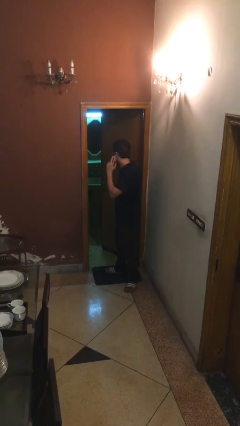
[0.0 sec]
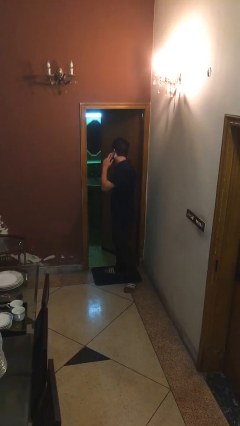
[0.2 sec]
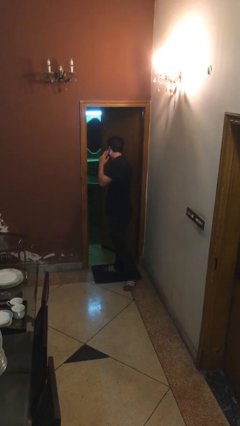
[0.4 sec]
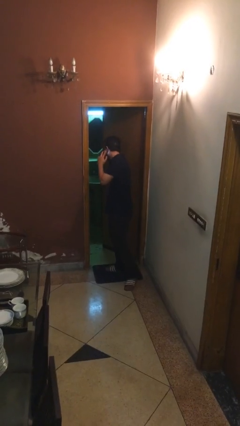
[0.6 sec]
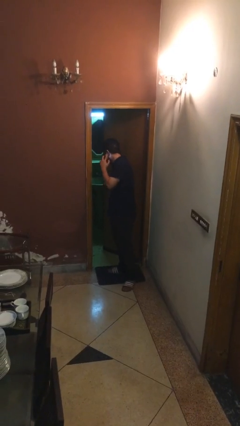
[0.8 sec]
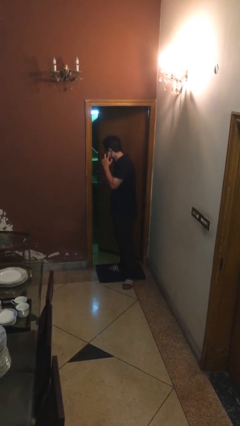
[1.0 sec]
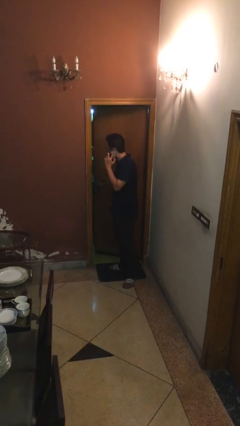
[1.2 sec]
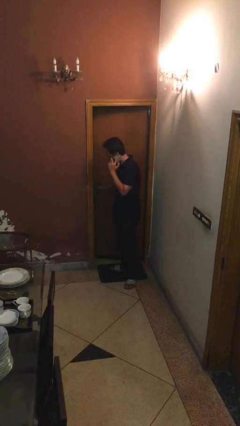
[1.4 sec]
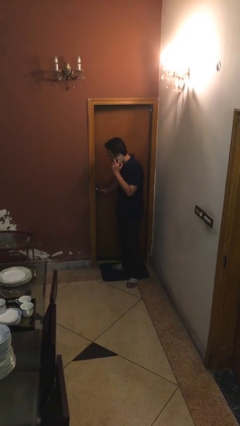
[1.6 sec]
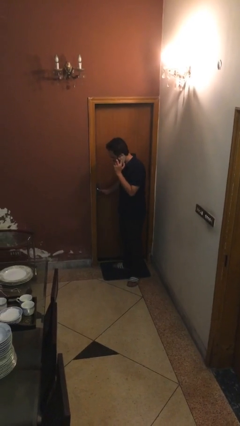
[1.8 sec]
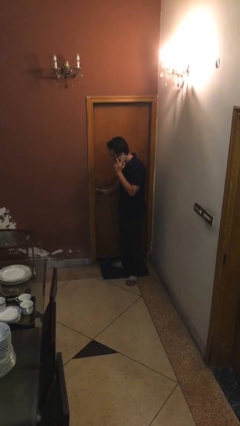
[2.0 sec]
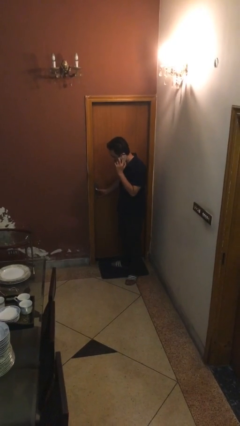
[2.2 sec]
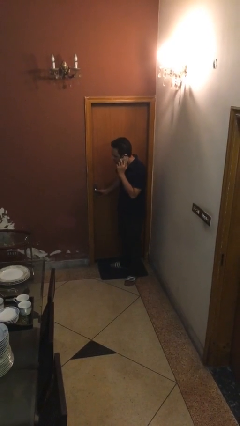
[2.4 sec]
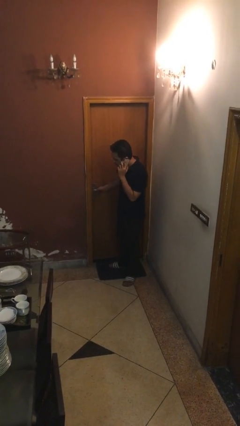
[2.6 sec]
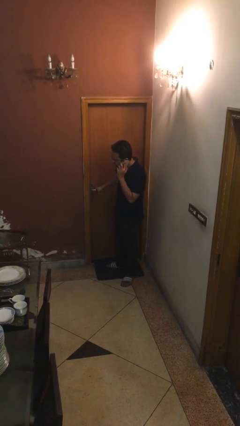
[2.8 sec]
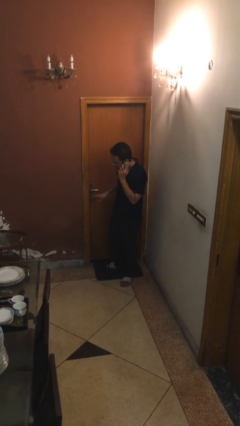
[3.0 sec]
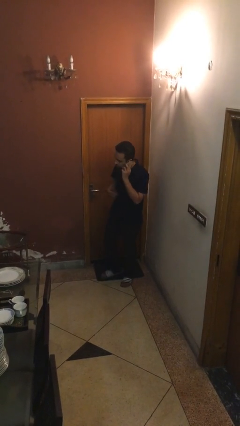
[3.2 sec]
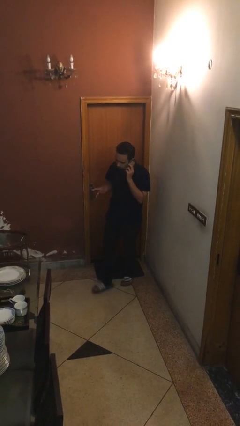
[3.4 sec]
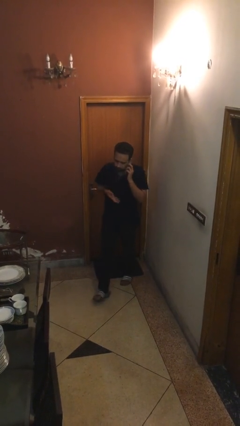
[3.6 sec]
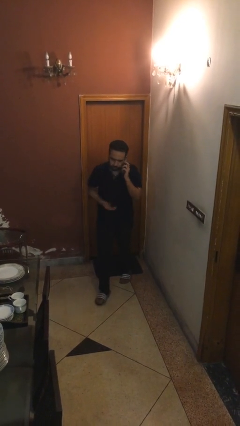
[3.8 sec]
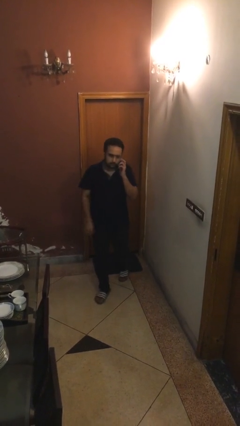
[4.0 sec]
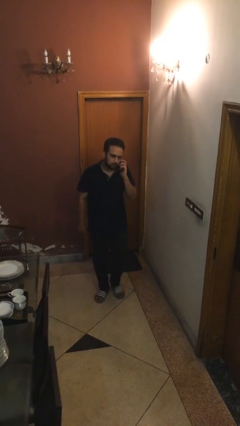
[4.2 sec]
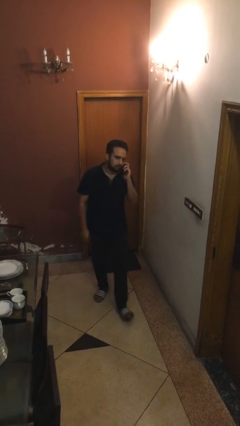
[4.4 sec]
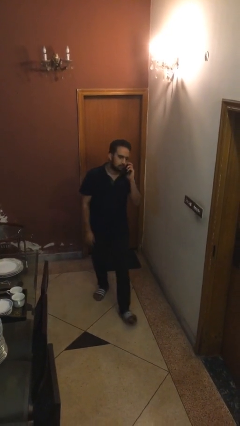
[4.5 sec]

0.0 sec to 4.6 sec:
person closes facility door

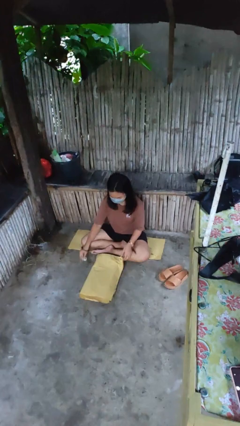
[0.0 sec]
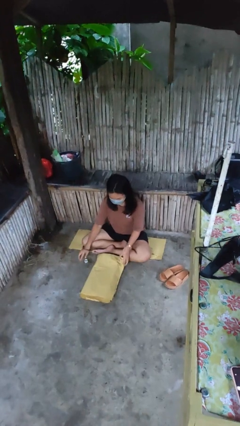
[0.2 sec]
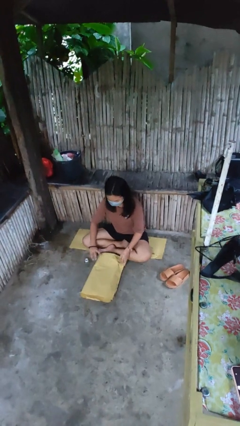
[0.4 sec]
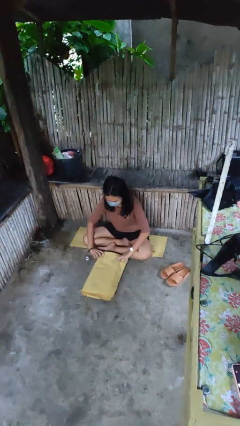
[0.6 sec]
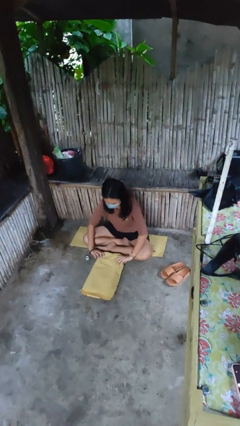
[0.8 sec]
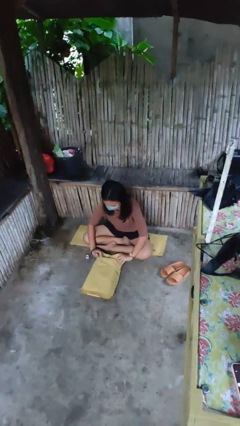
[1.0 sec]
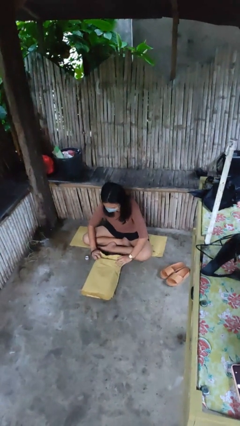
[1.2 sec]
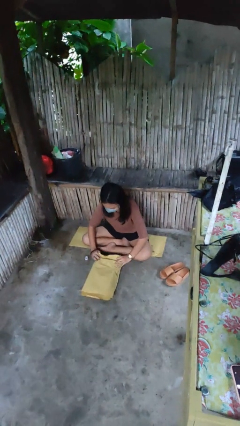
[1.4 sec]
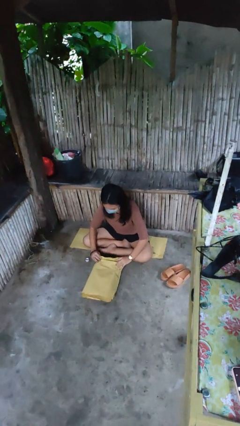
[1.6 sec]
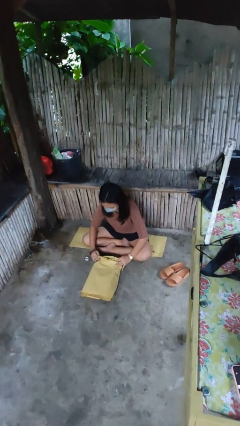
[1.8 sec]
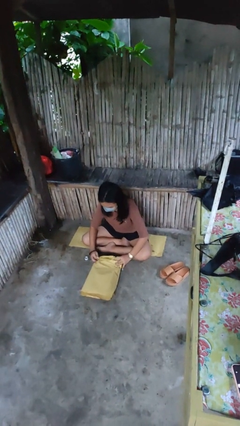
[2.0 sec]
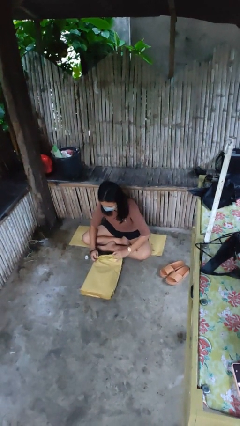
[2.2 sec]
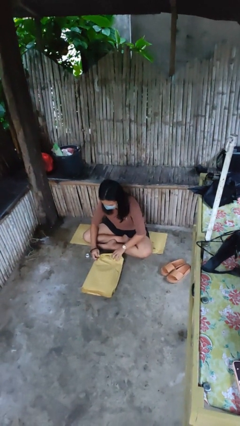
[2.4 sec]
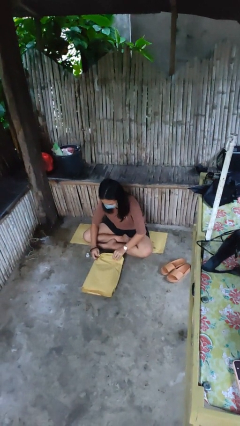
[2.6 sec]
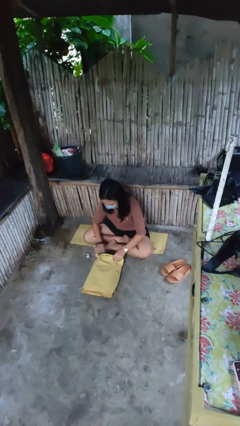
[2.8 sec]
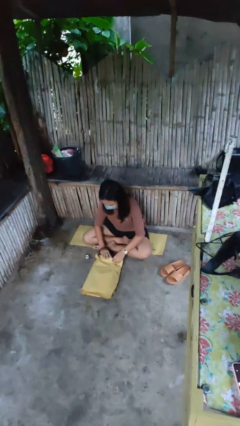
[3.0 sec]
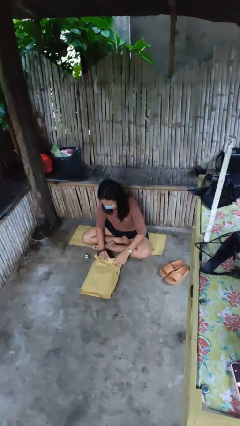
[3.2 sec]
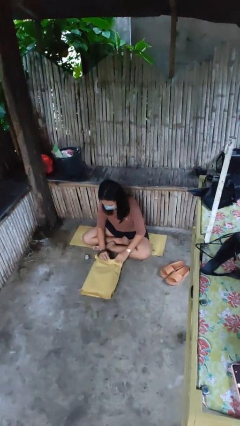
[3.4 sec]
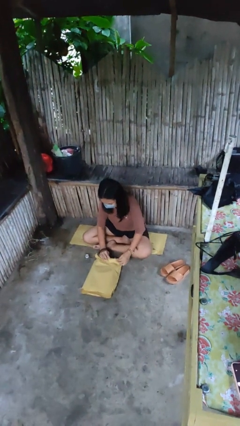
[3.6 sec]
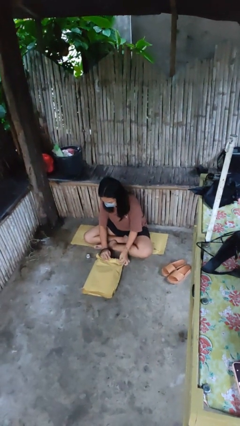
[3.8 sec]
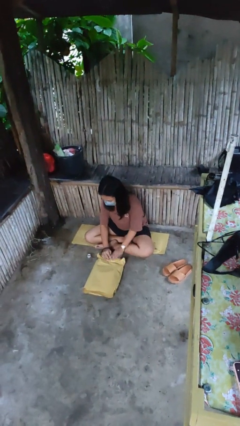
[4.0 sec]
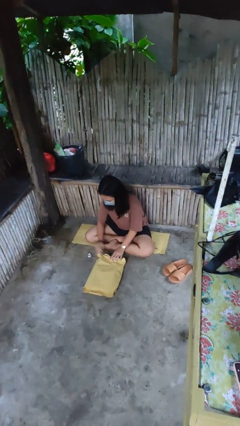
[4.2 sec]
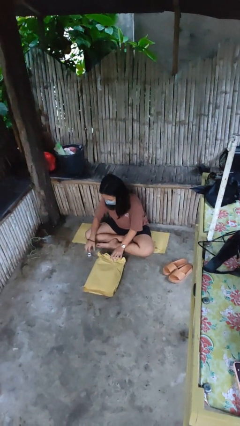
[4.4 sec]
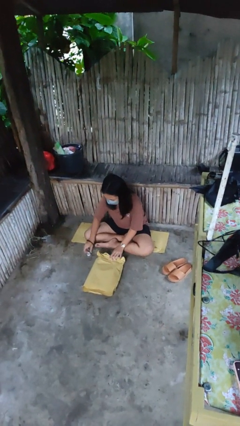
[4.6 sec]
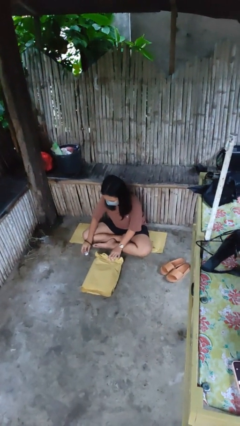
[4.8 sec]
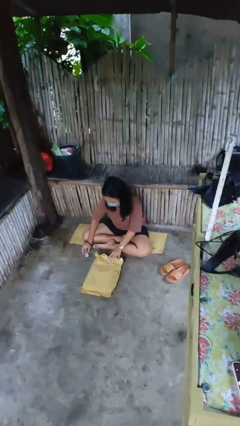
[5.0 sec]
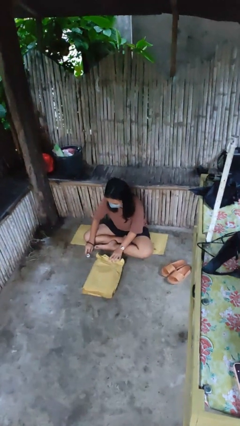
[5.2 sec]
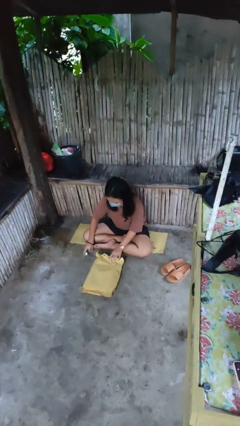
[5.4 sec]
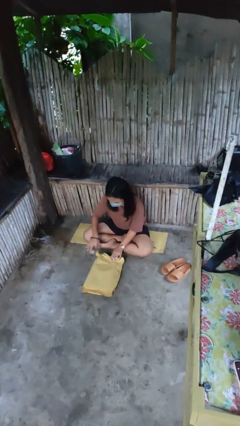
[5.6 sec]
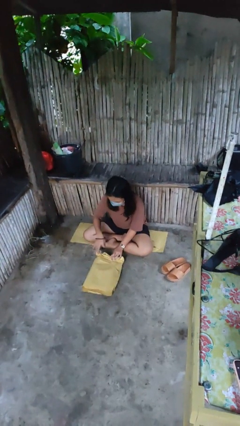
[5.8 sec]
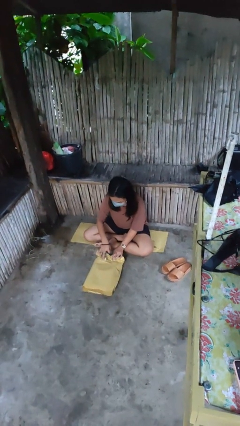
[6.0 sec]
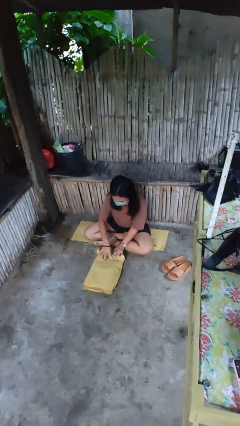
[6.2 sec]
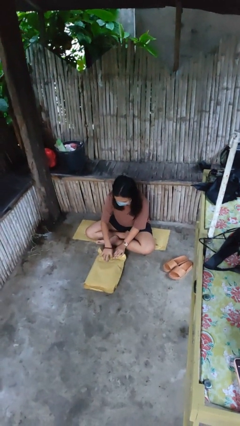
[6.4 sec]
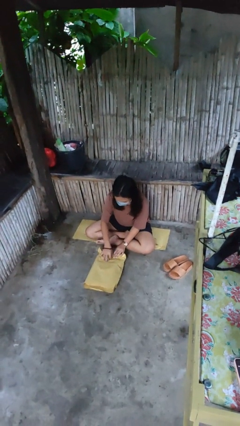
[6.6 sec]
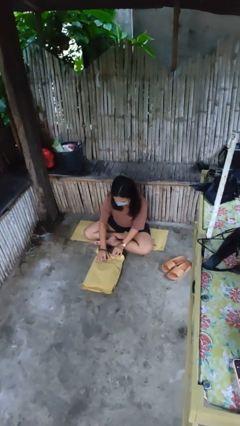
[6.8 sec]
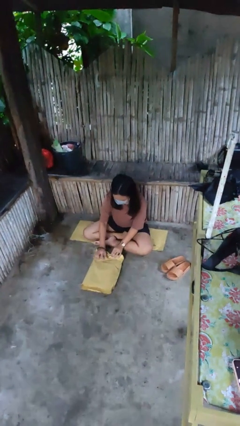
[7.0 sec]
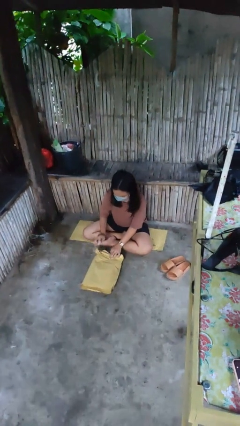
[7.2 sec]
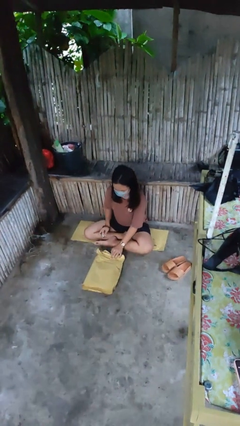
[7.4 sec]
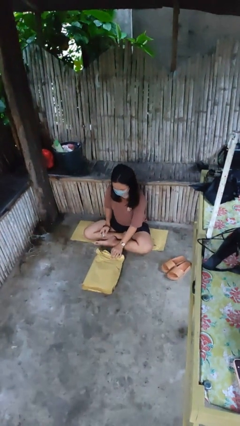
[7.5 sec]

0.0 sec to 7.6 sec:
person wraps box

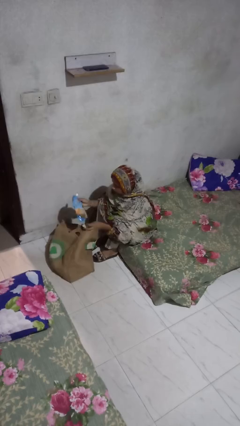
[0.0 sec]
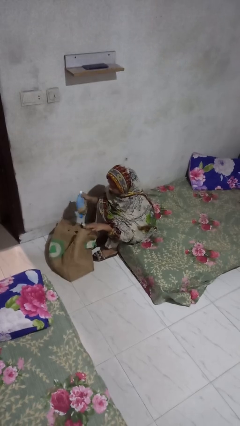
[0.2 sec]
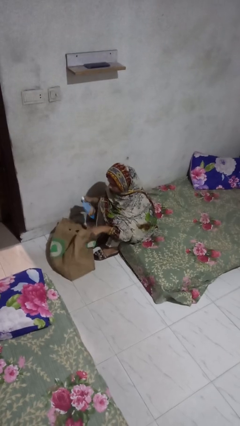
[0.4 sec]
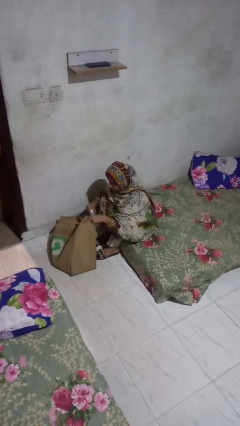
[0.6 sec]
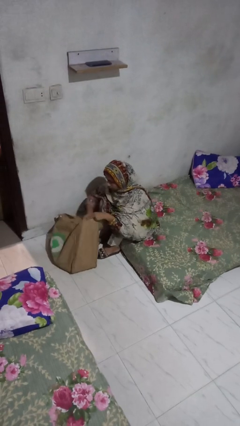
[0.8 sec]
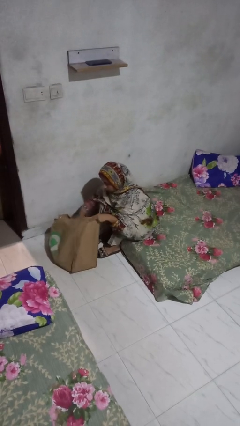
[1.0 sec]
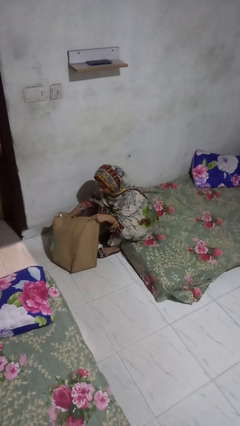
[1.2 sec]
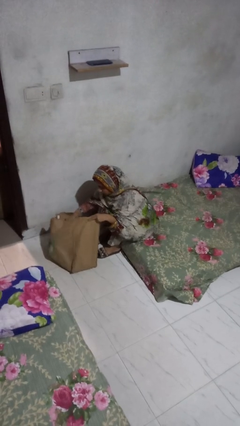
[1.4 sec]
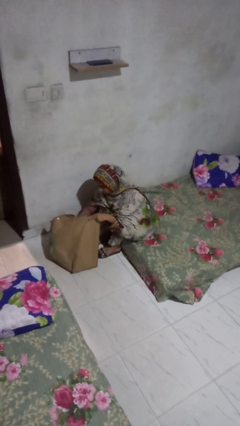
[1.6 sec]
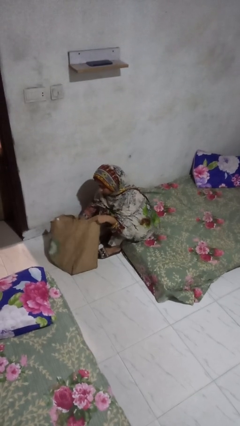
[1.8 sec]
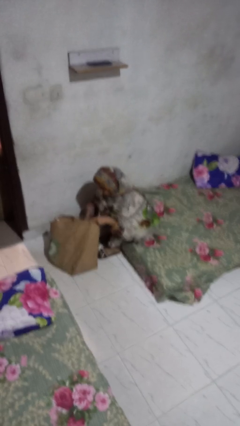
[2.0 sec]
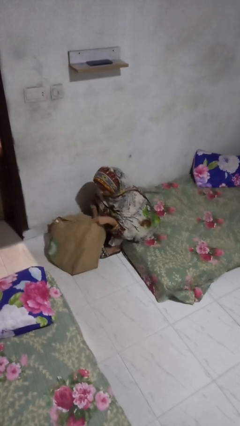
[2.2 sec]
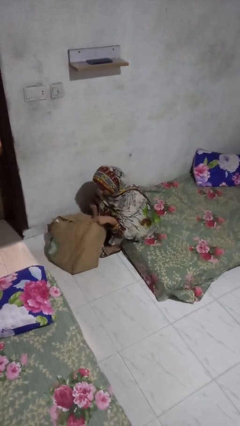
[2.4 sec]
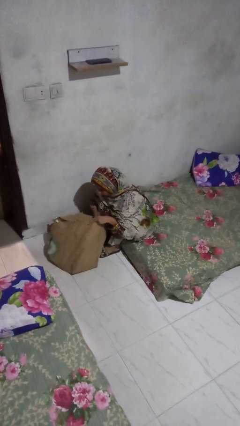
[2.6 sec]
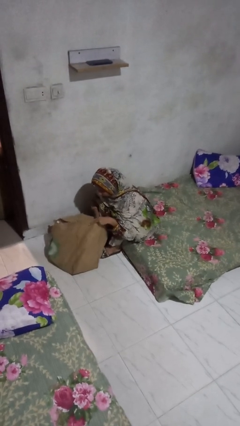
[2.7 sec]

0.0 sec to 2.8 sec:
person puts object into bag

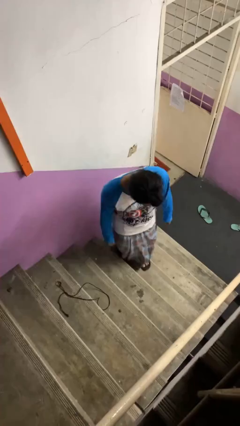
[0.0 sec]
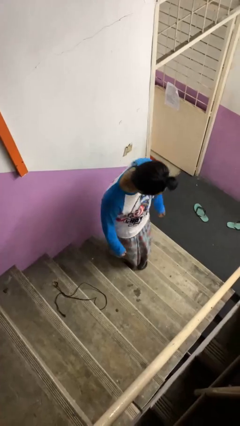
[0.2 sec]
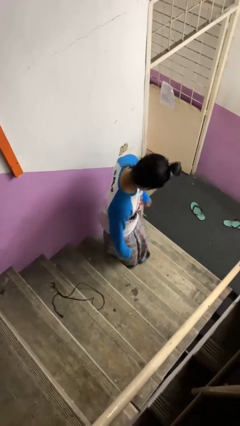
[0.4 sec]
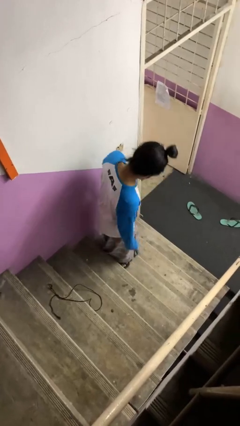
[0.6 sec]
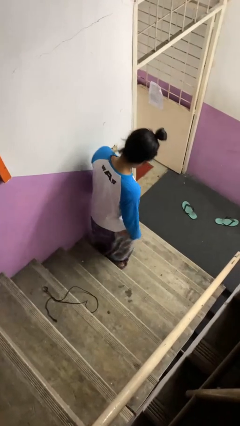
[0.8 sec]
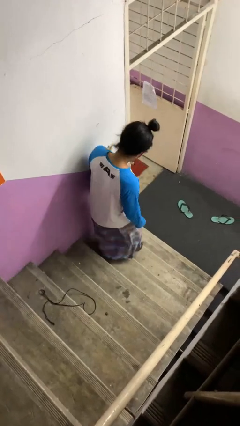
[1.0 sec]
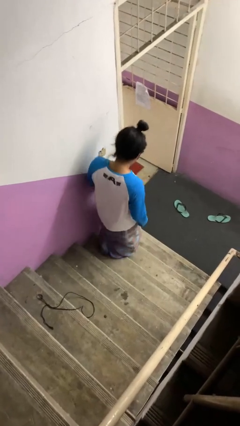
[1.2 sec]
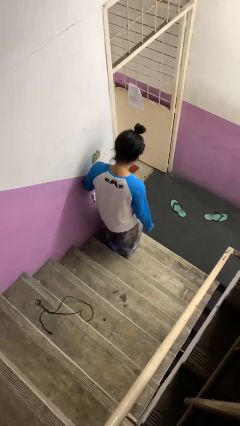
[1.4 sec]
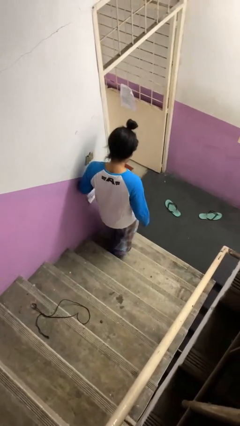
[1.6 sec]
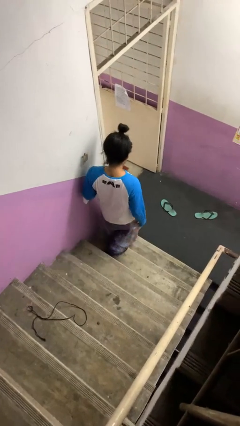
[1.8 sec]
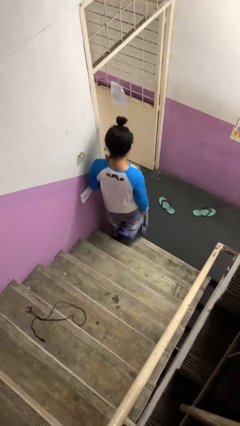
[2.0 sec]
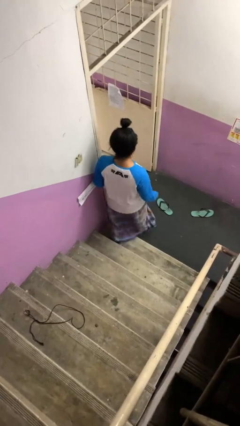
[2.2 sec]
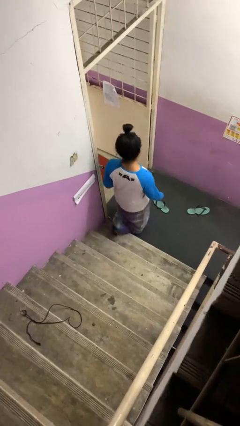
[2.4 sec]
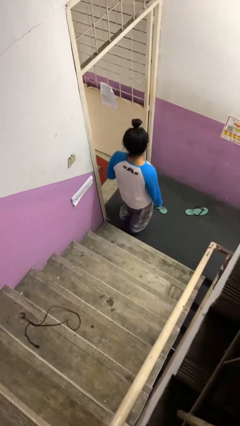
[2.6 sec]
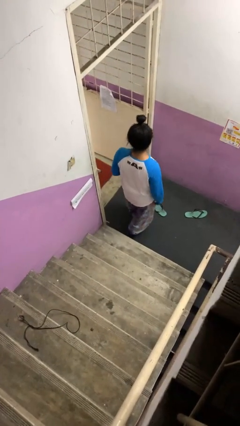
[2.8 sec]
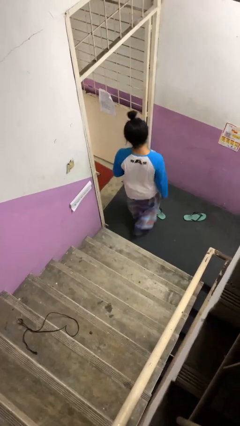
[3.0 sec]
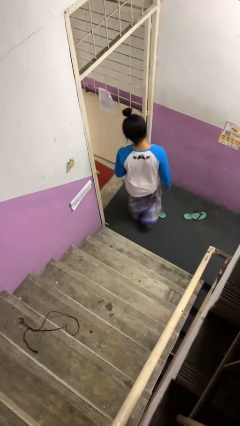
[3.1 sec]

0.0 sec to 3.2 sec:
person climbs down stairs
